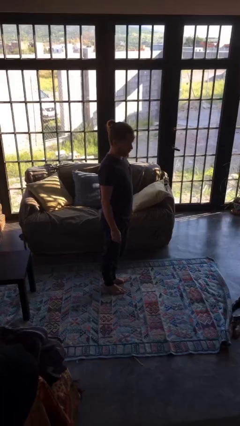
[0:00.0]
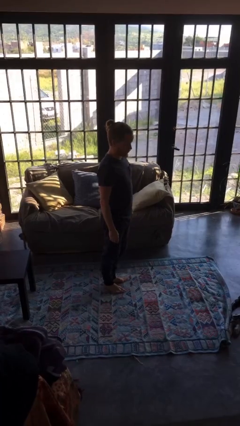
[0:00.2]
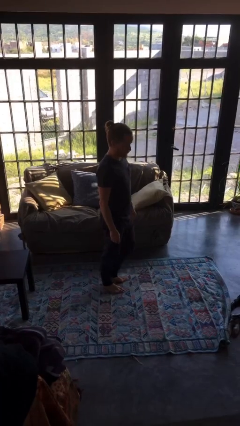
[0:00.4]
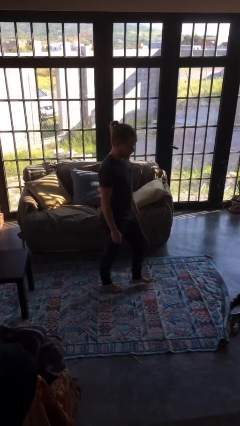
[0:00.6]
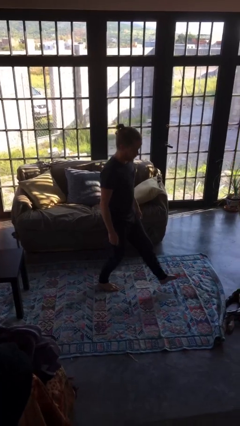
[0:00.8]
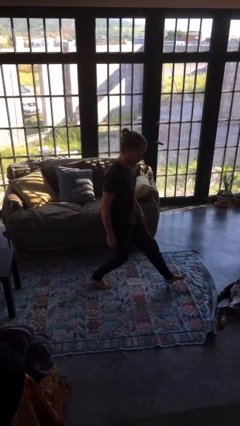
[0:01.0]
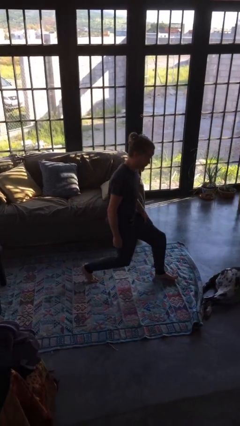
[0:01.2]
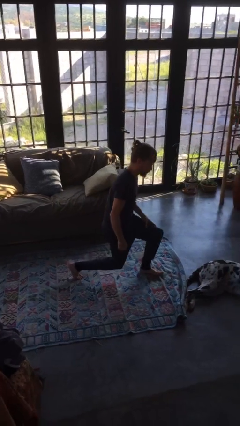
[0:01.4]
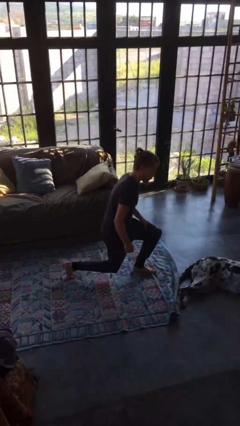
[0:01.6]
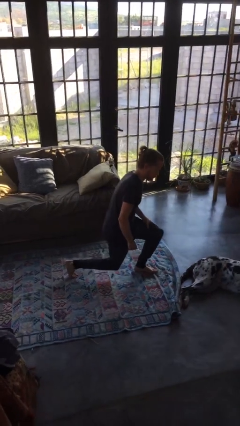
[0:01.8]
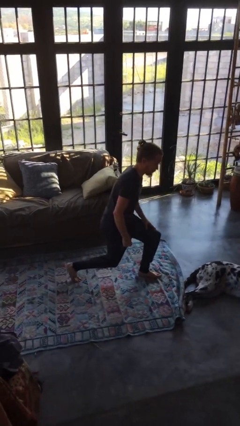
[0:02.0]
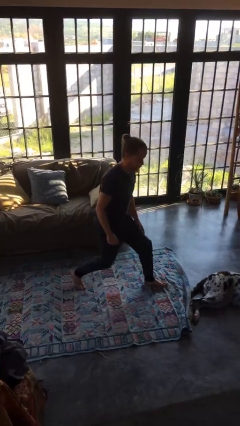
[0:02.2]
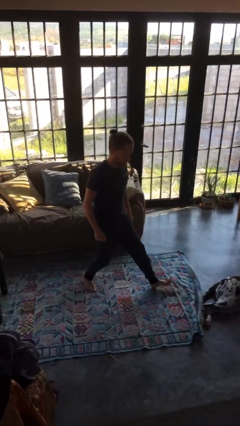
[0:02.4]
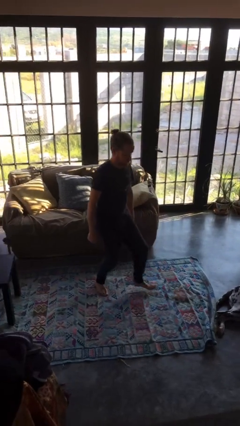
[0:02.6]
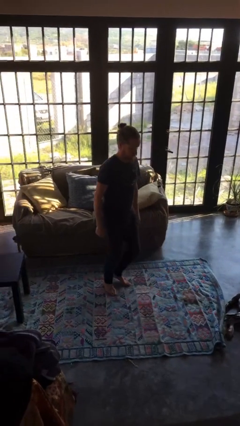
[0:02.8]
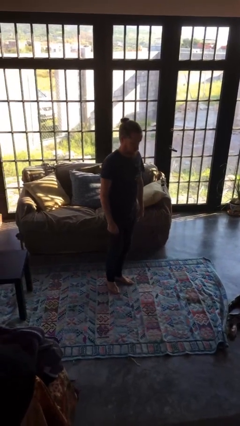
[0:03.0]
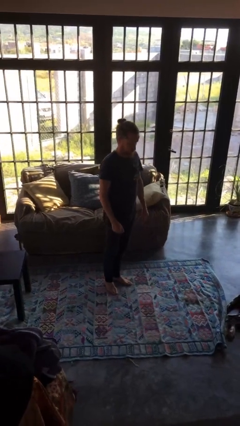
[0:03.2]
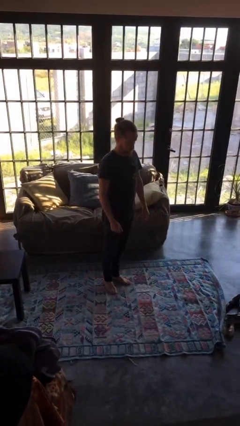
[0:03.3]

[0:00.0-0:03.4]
person exercises with lunges

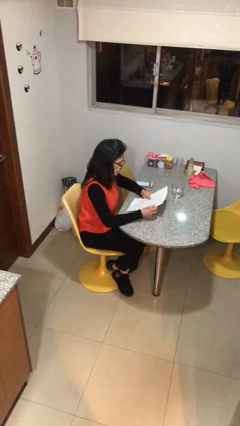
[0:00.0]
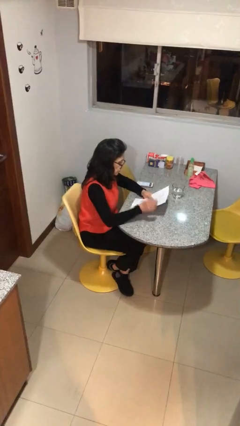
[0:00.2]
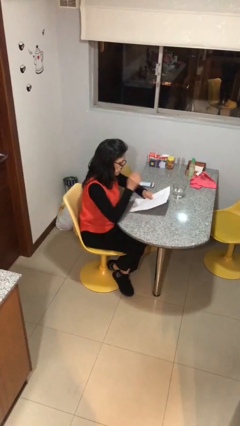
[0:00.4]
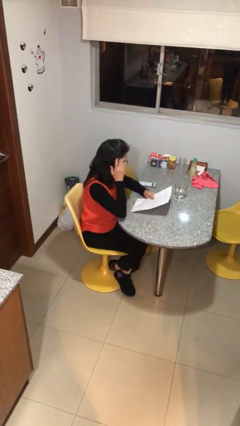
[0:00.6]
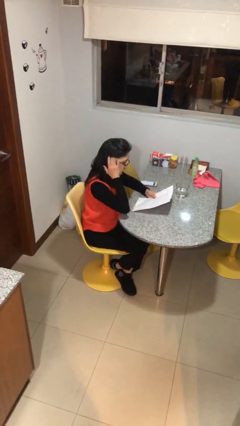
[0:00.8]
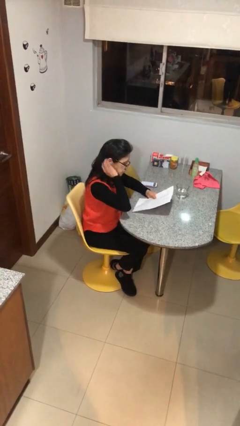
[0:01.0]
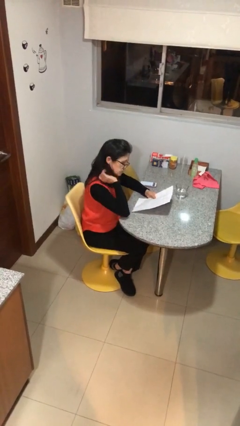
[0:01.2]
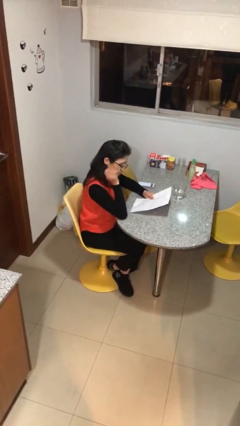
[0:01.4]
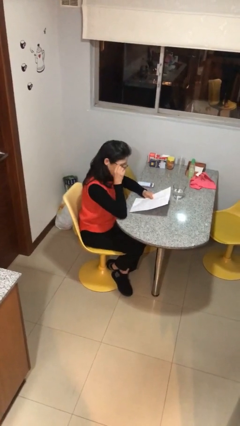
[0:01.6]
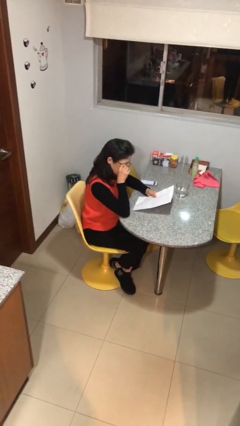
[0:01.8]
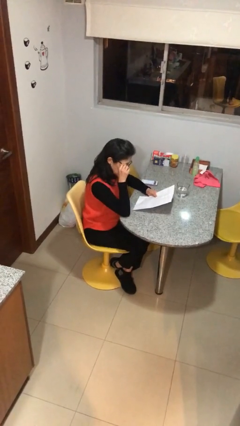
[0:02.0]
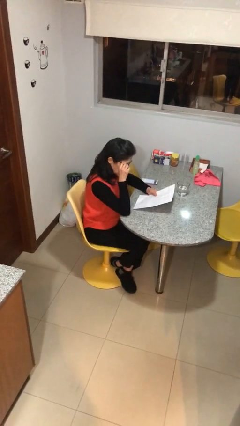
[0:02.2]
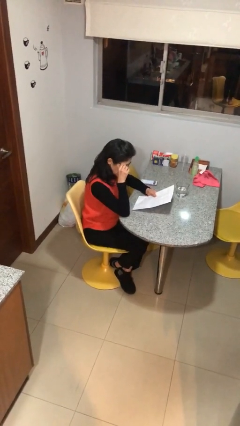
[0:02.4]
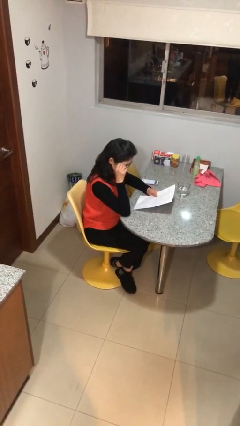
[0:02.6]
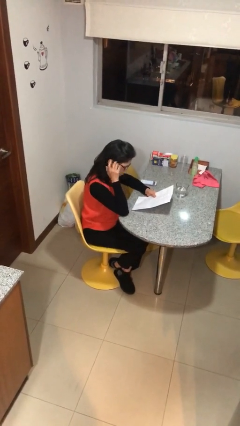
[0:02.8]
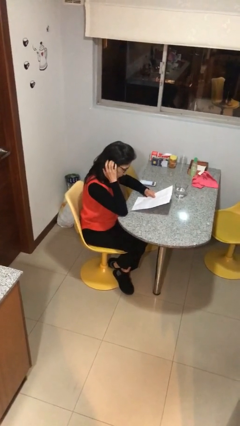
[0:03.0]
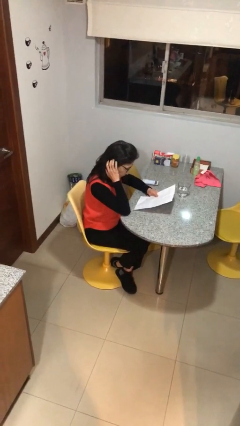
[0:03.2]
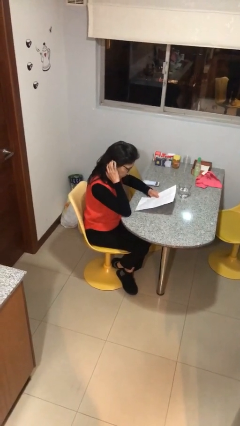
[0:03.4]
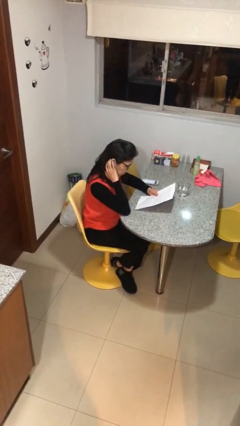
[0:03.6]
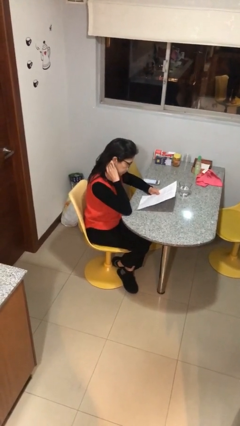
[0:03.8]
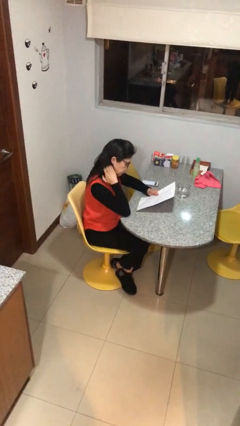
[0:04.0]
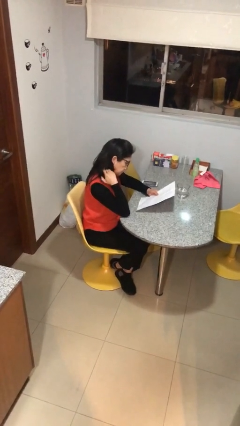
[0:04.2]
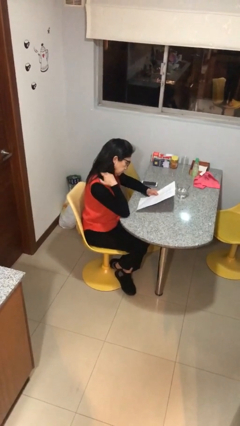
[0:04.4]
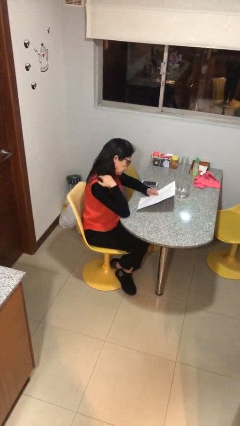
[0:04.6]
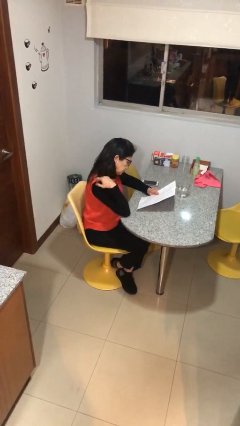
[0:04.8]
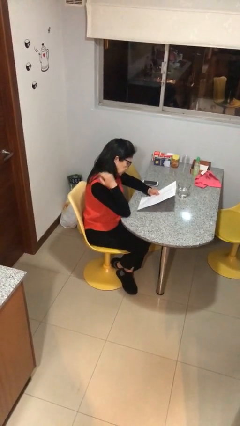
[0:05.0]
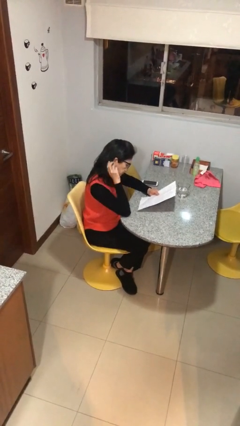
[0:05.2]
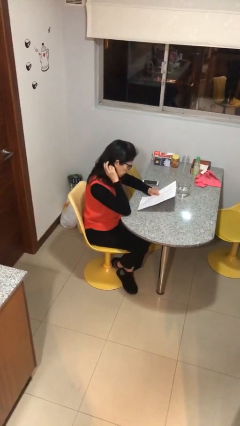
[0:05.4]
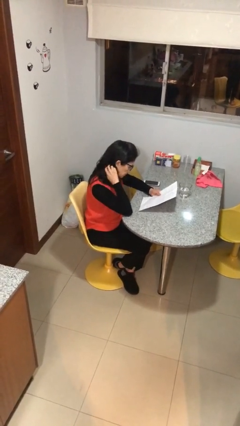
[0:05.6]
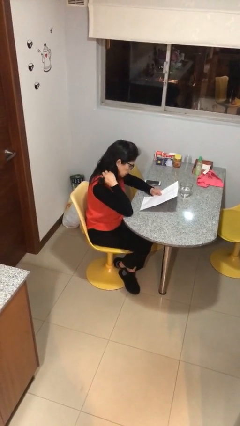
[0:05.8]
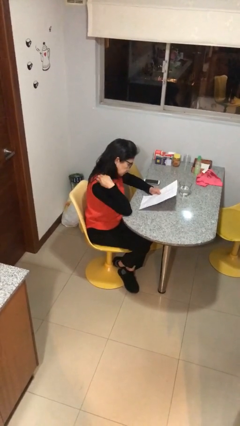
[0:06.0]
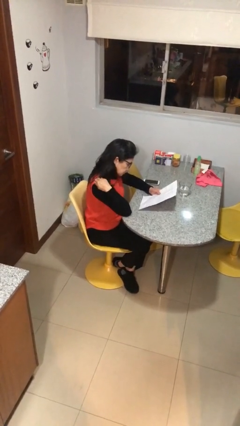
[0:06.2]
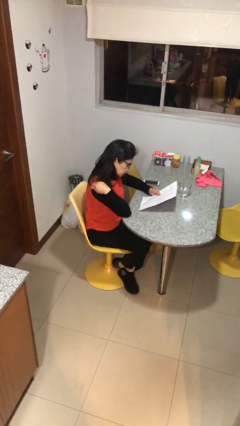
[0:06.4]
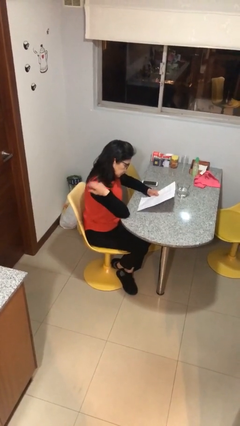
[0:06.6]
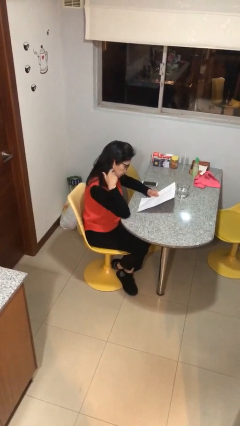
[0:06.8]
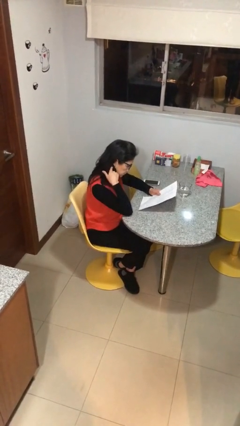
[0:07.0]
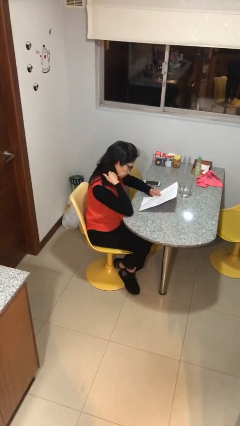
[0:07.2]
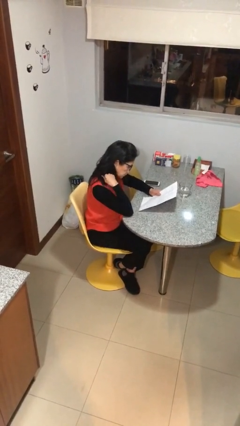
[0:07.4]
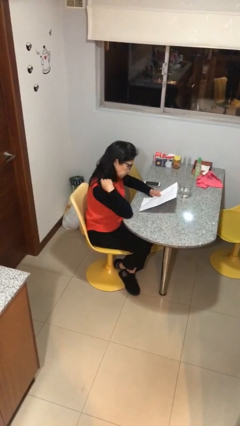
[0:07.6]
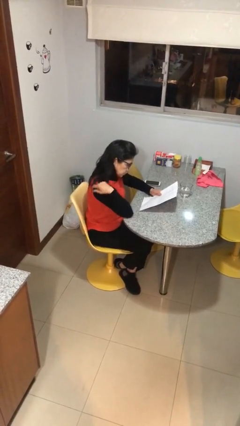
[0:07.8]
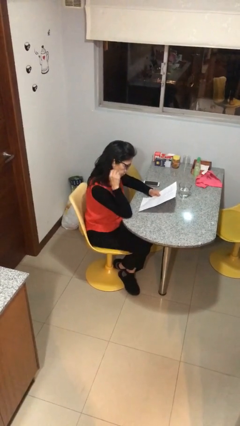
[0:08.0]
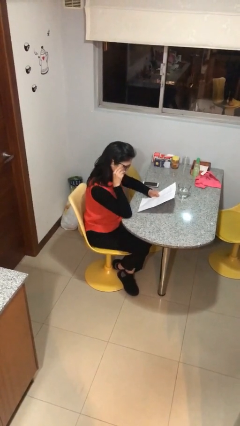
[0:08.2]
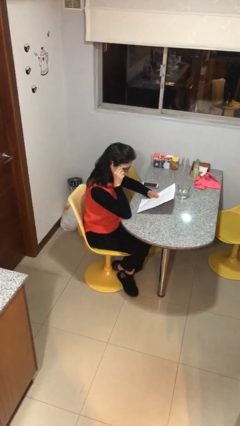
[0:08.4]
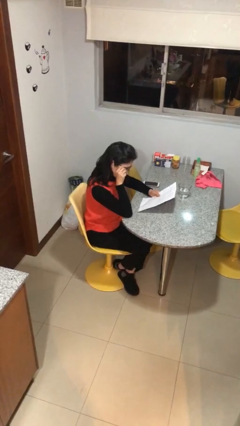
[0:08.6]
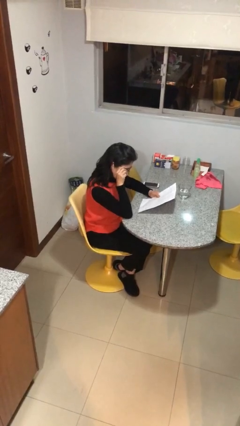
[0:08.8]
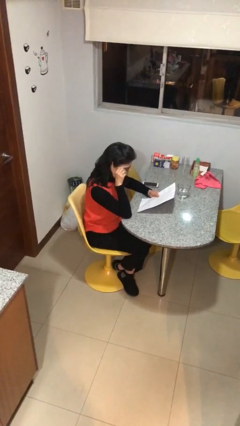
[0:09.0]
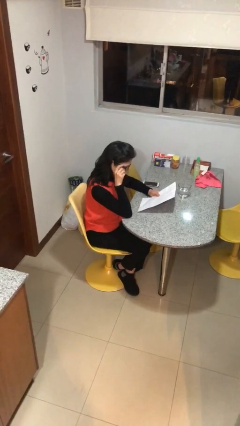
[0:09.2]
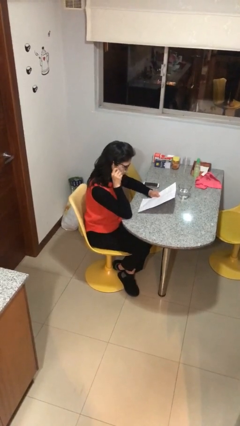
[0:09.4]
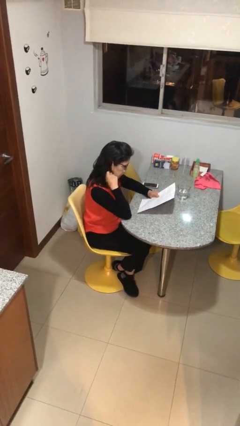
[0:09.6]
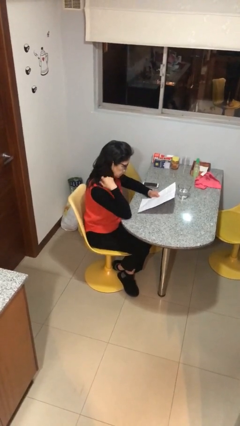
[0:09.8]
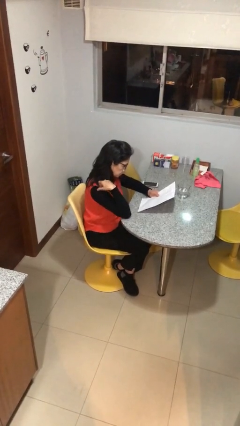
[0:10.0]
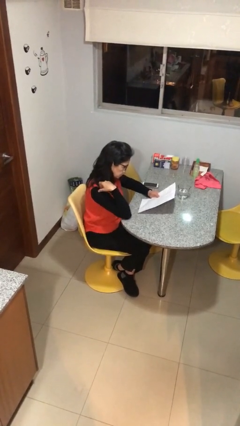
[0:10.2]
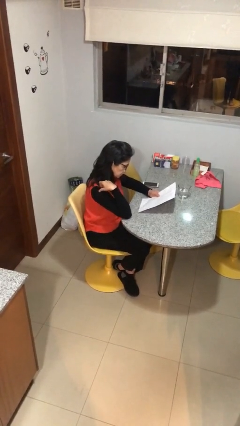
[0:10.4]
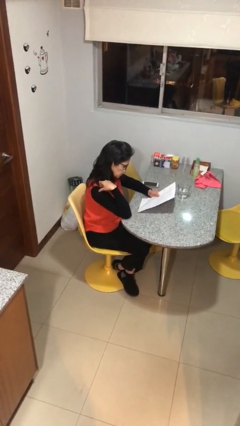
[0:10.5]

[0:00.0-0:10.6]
person reads document

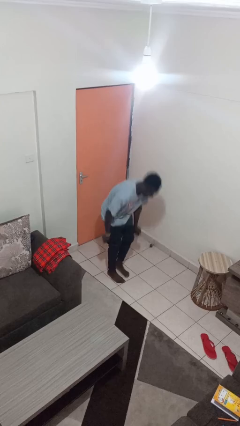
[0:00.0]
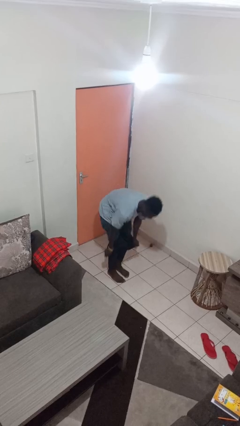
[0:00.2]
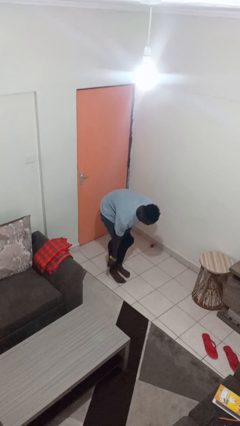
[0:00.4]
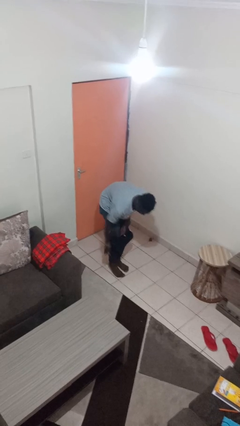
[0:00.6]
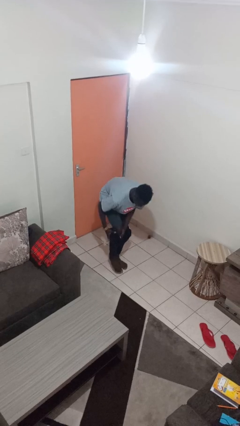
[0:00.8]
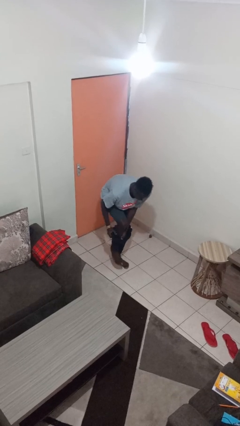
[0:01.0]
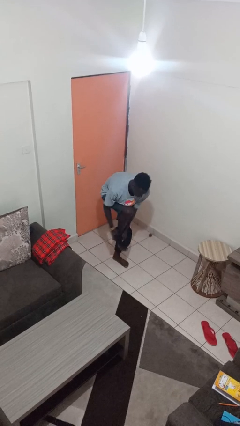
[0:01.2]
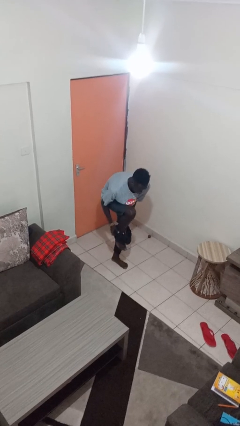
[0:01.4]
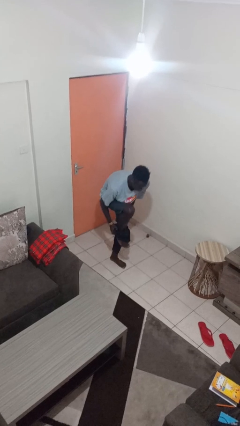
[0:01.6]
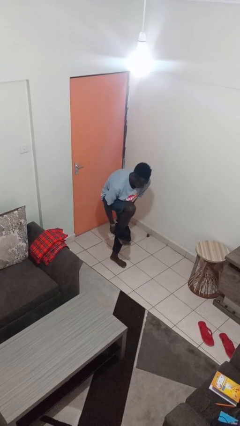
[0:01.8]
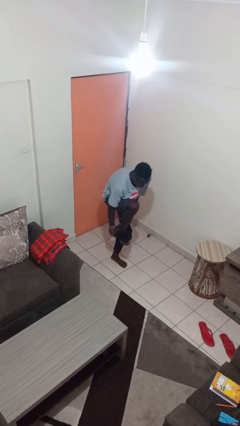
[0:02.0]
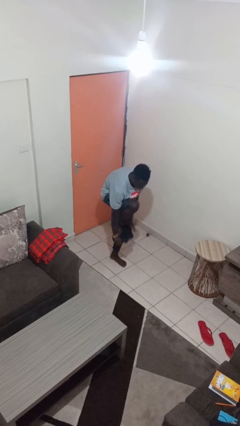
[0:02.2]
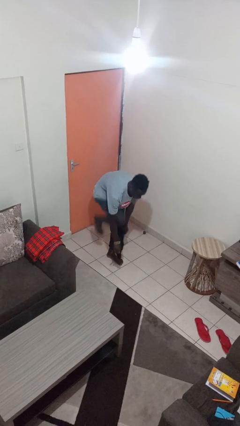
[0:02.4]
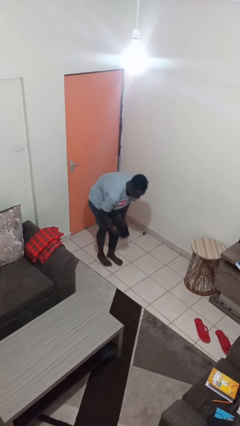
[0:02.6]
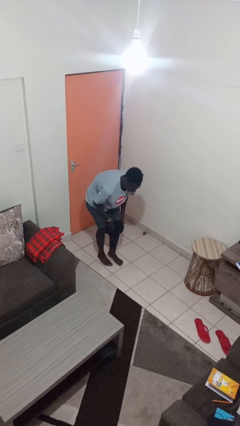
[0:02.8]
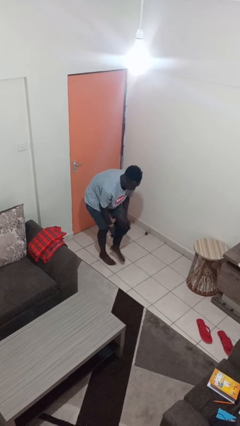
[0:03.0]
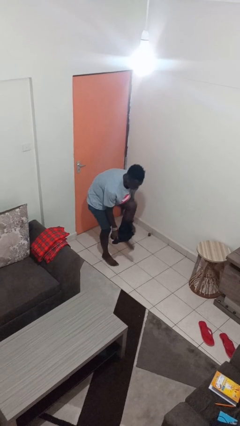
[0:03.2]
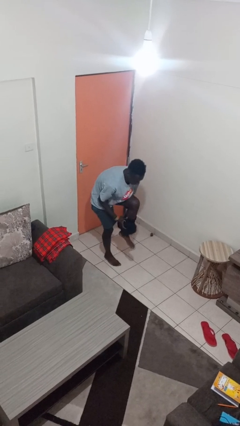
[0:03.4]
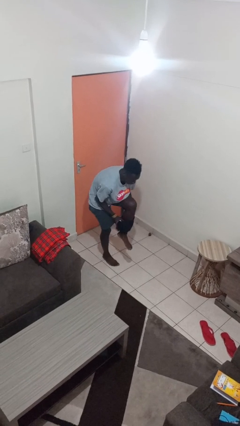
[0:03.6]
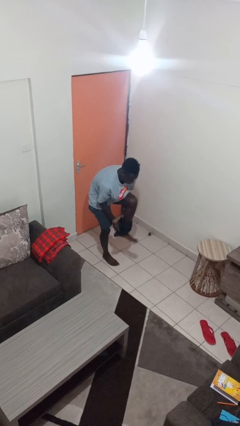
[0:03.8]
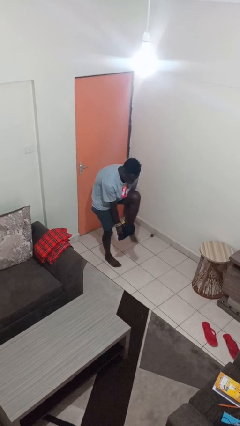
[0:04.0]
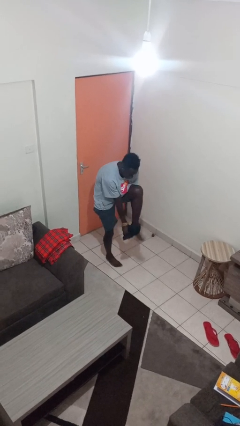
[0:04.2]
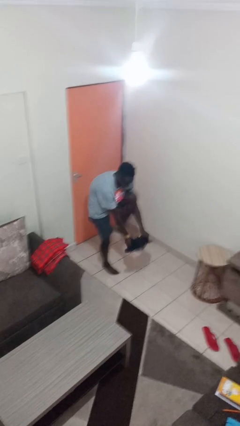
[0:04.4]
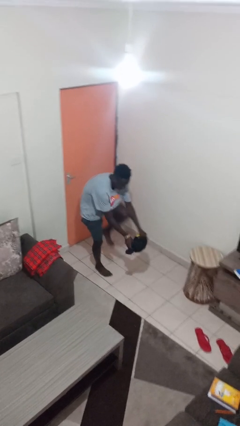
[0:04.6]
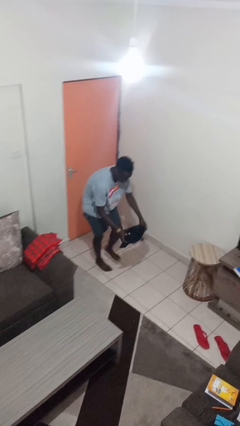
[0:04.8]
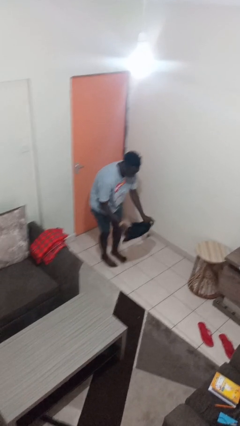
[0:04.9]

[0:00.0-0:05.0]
person takes off pants
